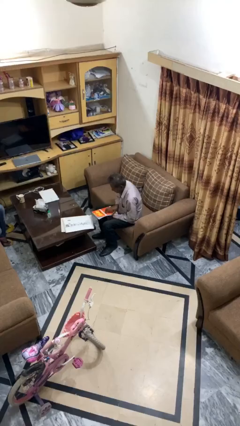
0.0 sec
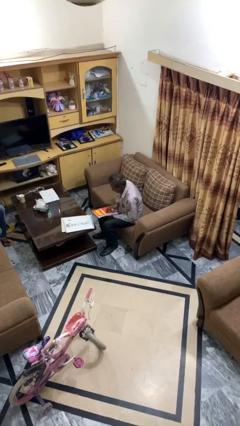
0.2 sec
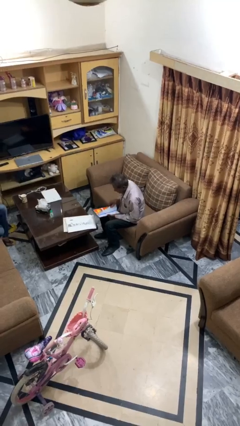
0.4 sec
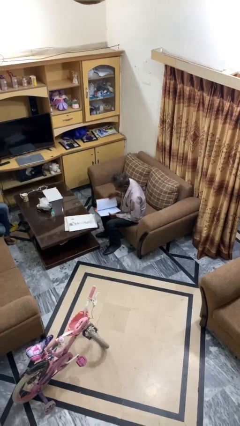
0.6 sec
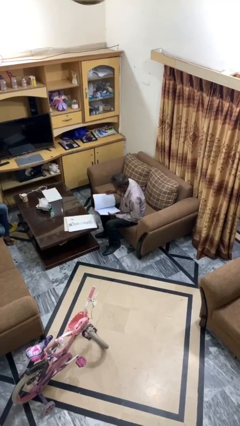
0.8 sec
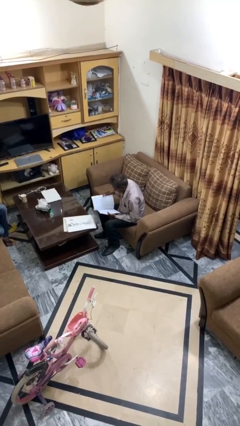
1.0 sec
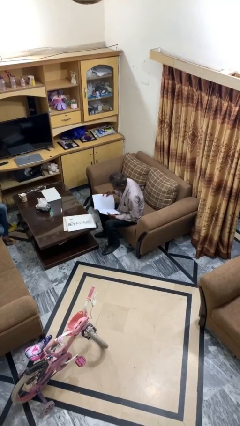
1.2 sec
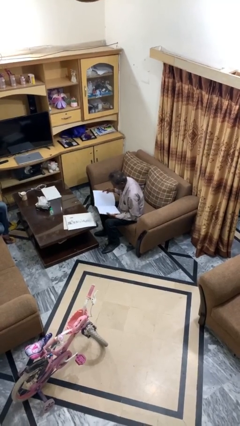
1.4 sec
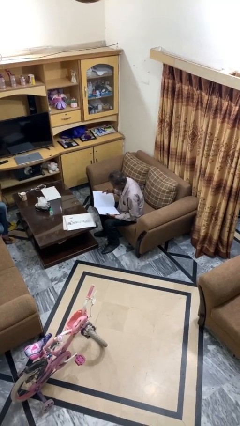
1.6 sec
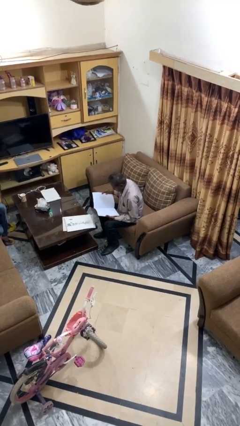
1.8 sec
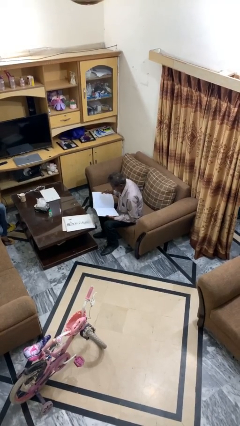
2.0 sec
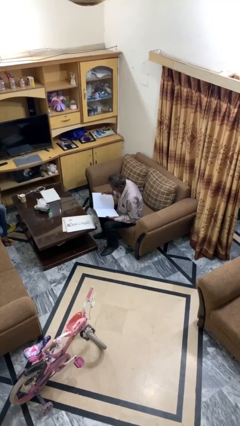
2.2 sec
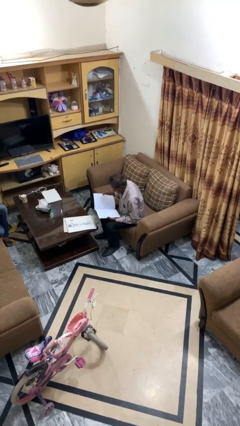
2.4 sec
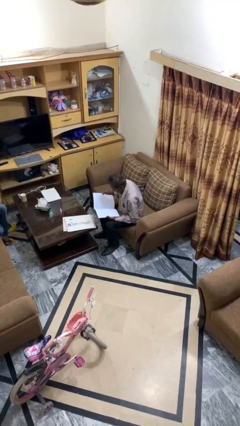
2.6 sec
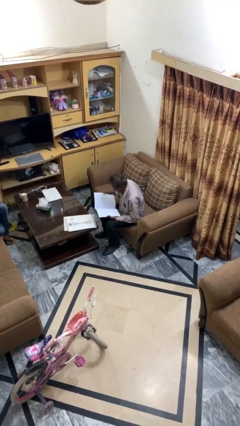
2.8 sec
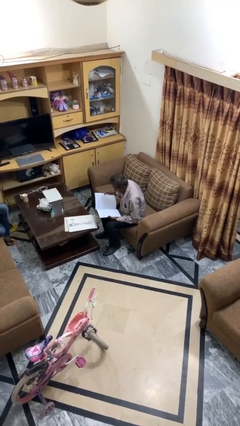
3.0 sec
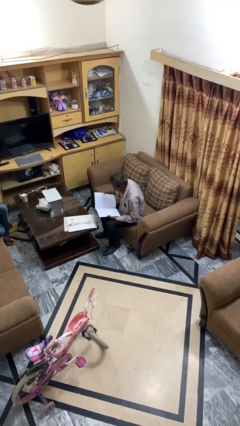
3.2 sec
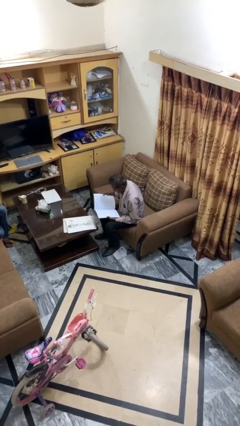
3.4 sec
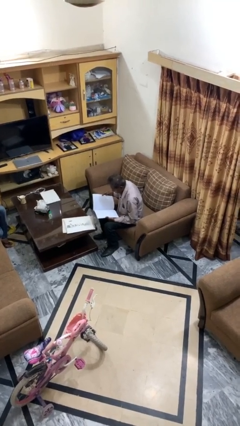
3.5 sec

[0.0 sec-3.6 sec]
person reads document

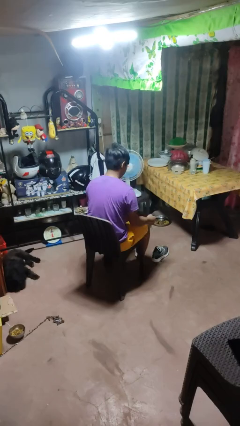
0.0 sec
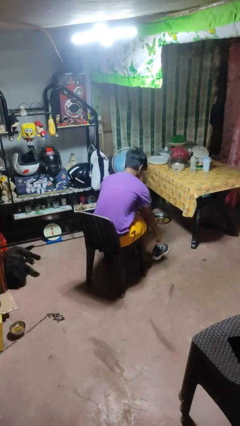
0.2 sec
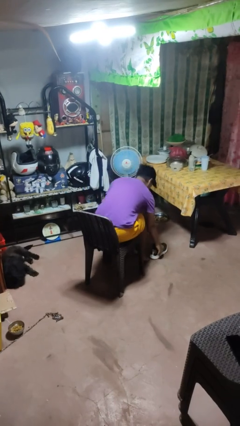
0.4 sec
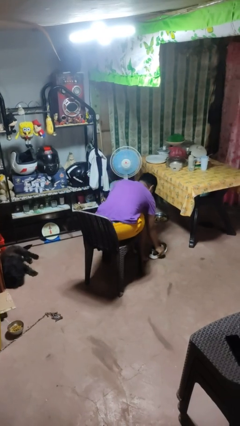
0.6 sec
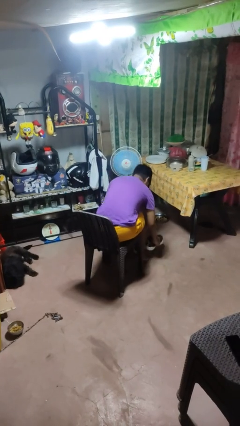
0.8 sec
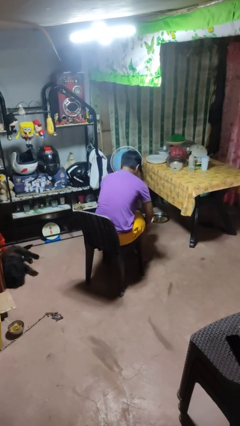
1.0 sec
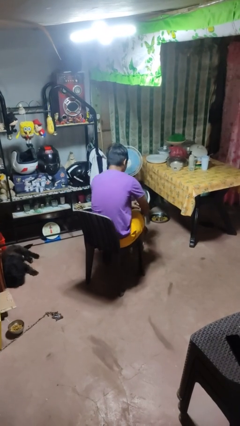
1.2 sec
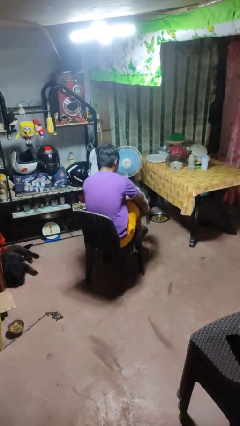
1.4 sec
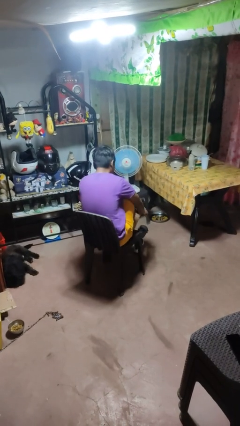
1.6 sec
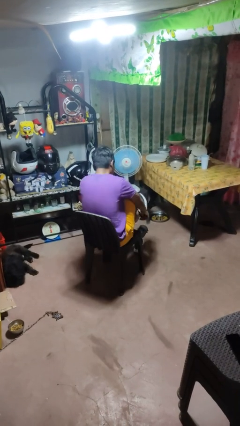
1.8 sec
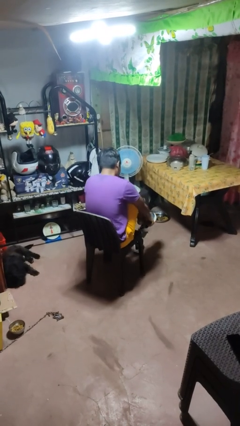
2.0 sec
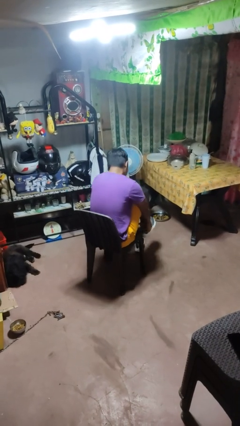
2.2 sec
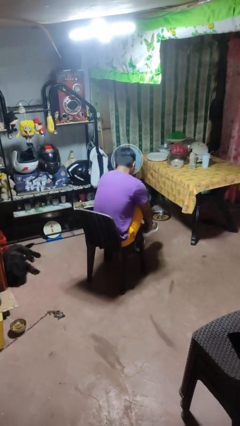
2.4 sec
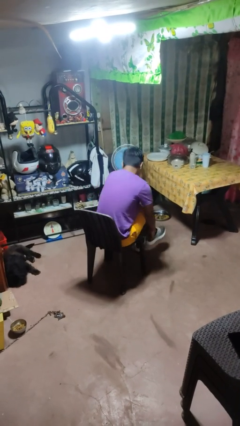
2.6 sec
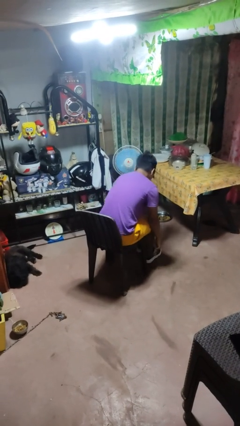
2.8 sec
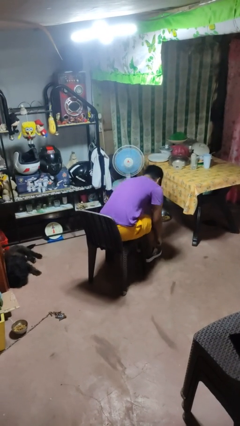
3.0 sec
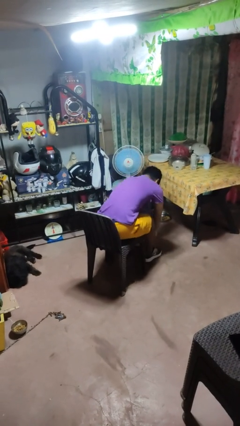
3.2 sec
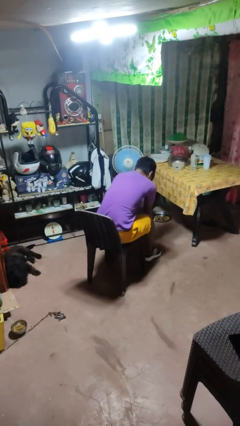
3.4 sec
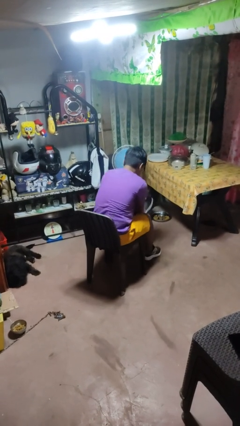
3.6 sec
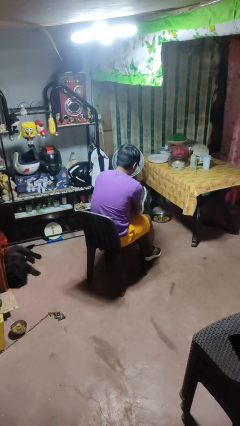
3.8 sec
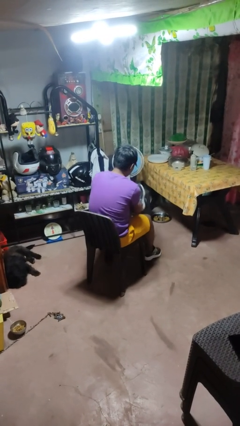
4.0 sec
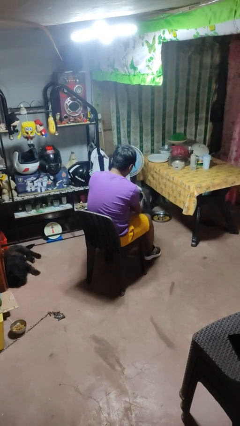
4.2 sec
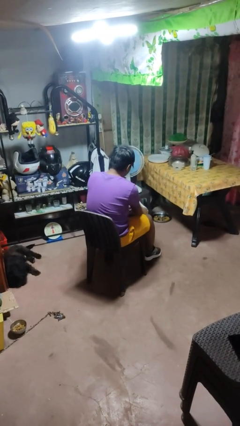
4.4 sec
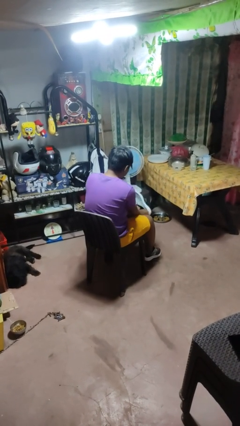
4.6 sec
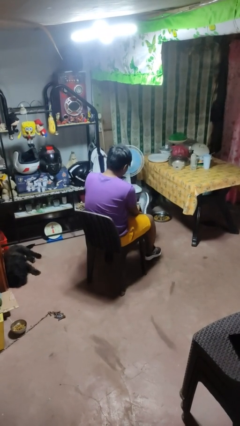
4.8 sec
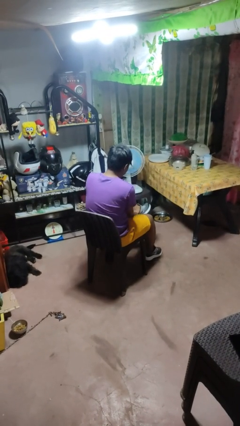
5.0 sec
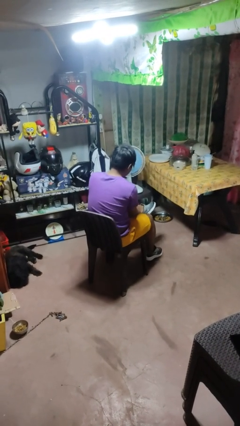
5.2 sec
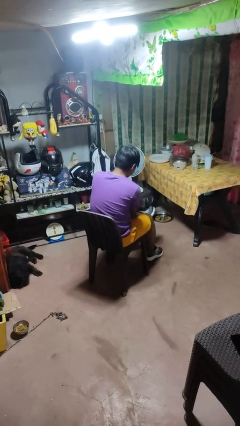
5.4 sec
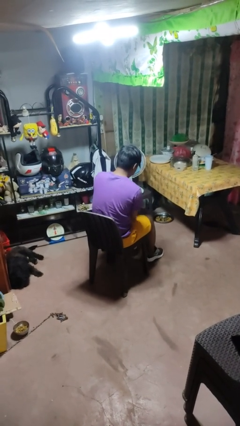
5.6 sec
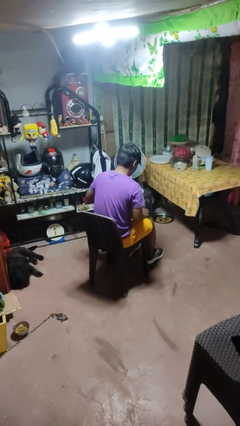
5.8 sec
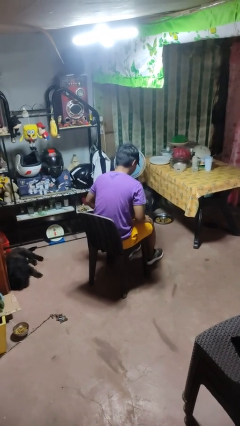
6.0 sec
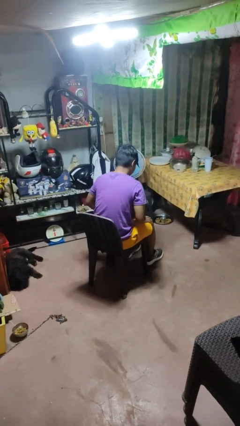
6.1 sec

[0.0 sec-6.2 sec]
person puts on shoes

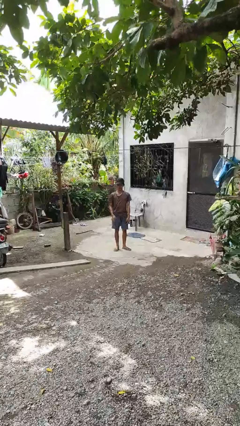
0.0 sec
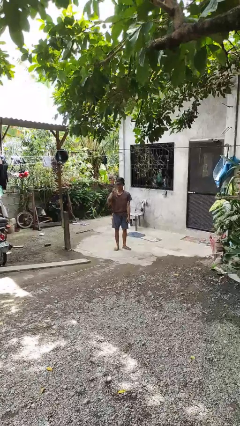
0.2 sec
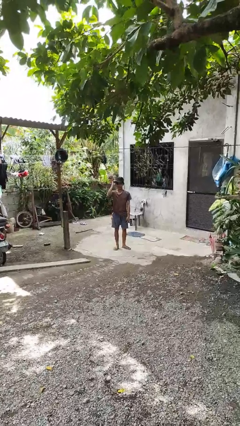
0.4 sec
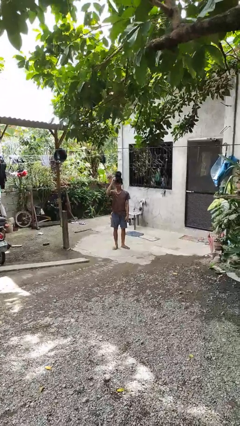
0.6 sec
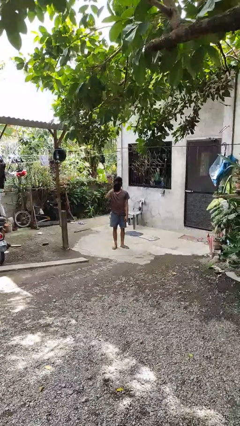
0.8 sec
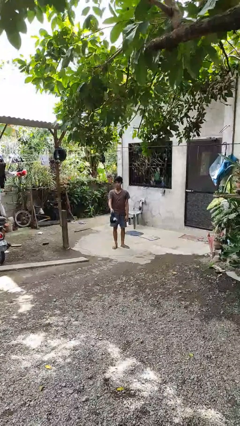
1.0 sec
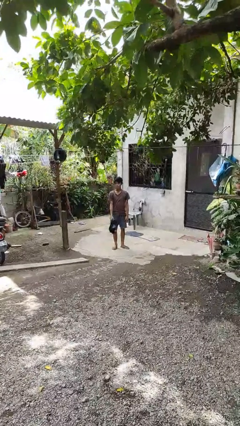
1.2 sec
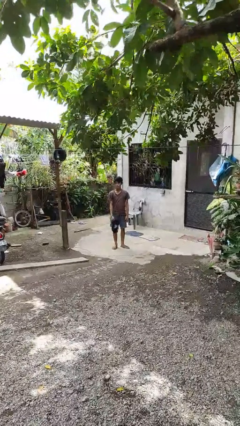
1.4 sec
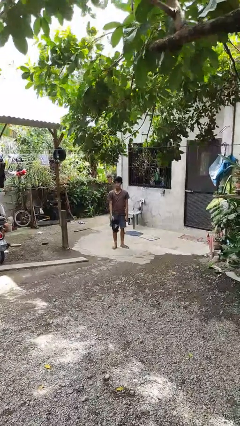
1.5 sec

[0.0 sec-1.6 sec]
person takes off hat

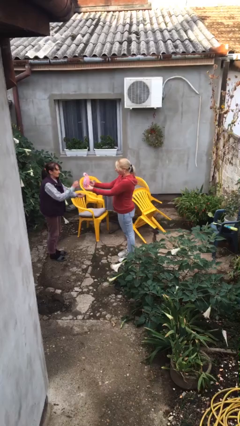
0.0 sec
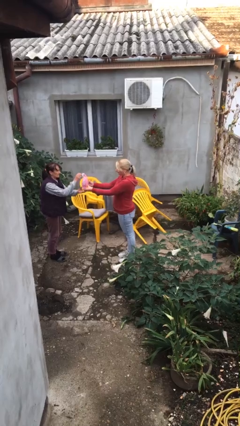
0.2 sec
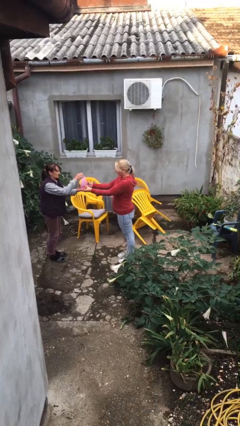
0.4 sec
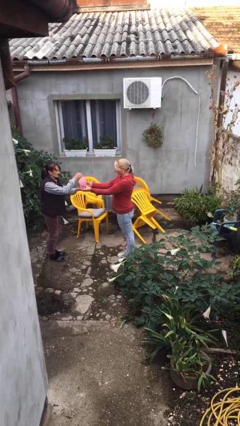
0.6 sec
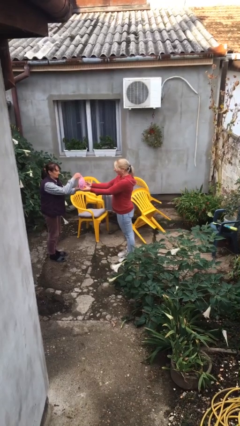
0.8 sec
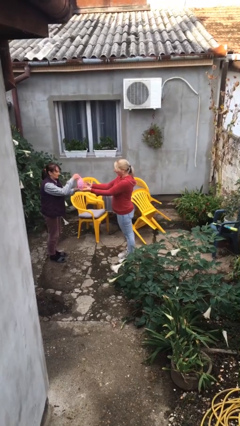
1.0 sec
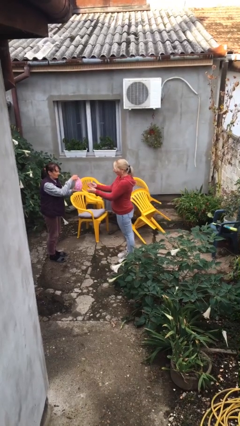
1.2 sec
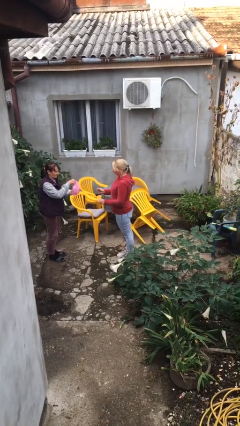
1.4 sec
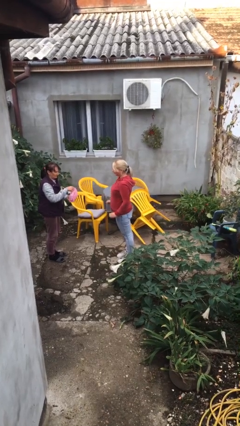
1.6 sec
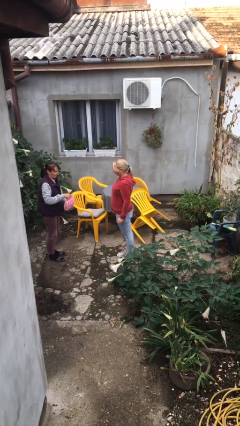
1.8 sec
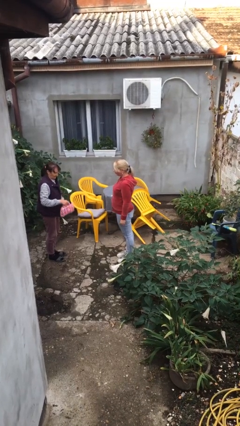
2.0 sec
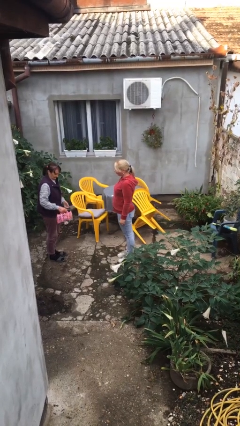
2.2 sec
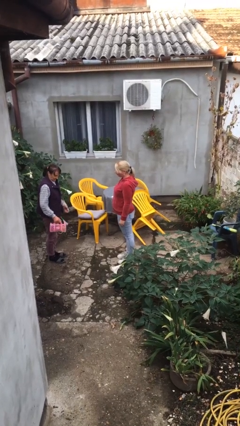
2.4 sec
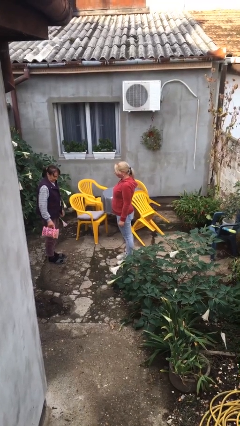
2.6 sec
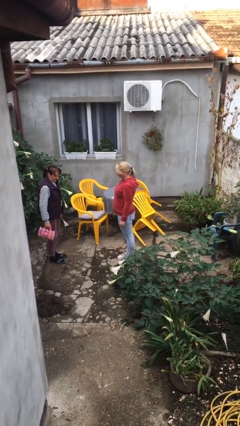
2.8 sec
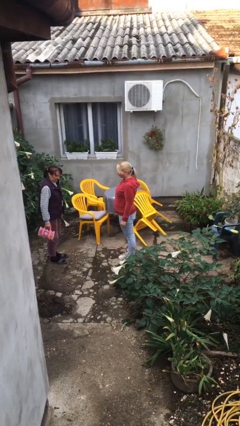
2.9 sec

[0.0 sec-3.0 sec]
person transfers object to person

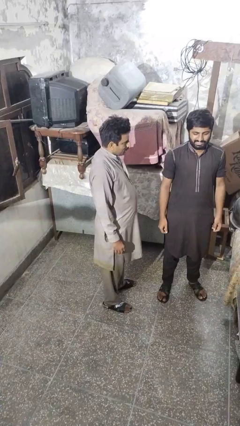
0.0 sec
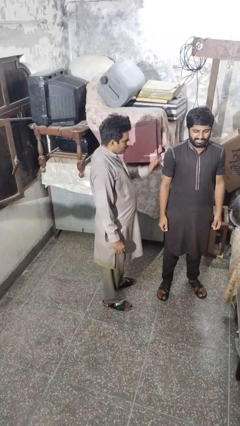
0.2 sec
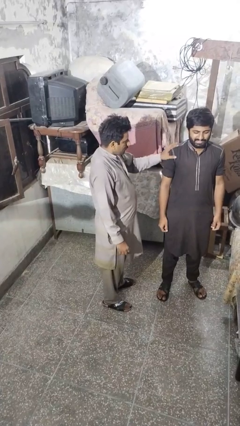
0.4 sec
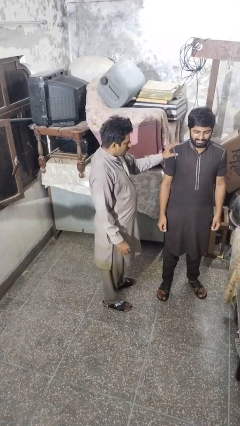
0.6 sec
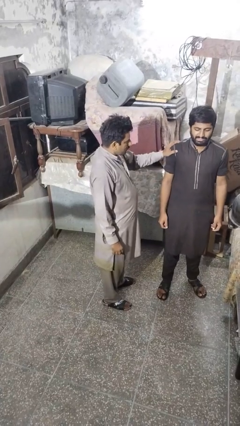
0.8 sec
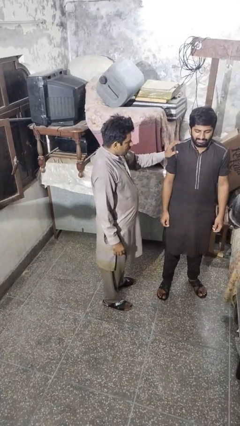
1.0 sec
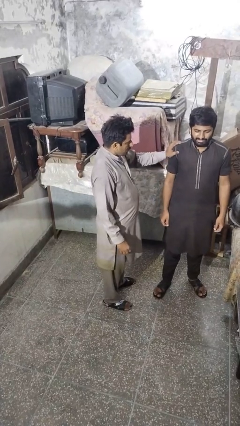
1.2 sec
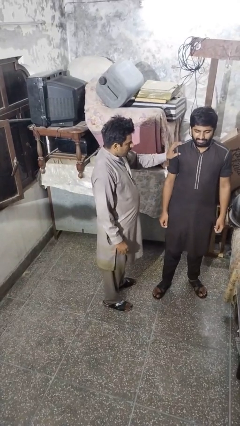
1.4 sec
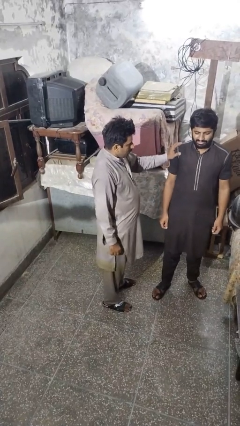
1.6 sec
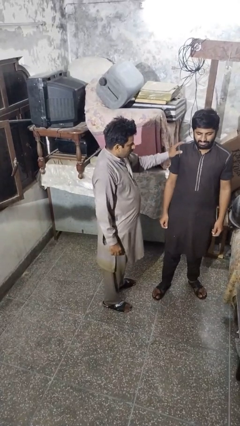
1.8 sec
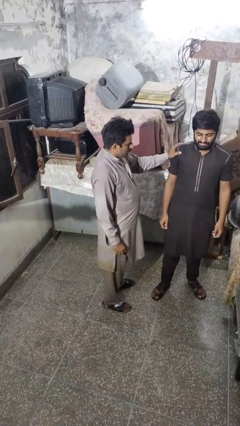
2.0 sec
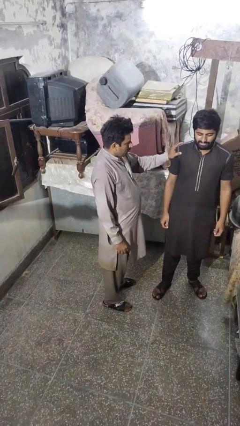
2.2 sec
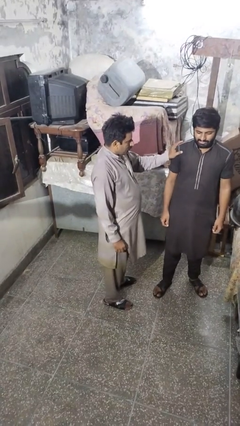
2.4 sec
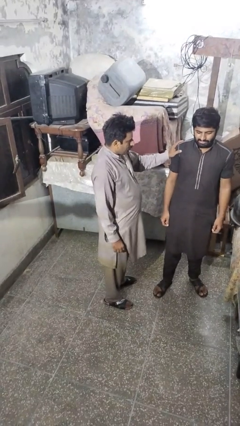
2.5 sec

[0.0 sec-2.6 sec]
person grabs person by shoulder

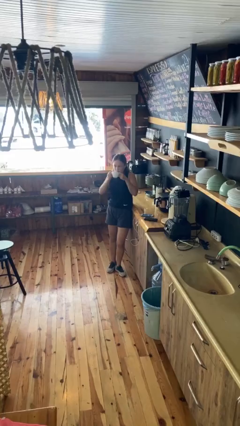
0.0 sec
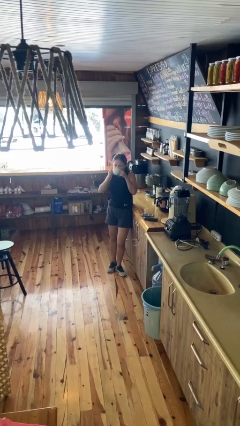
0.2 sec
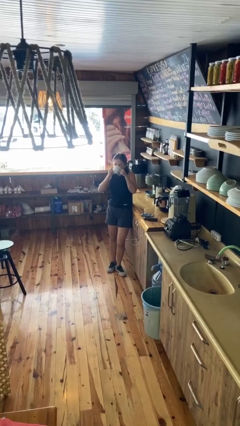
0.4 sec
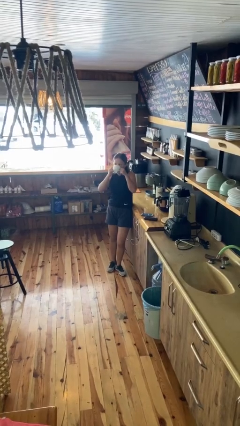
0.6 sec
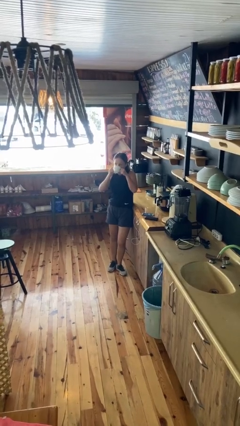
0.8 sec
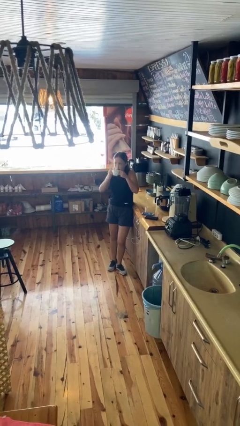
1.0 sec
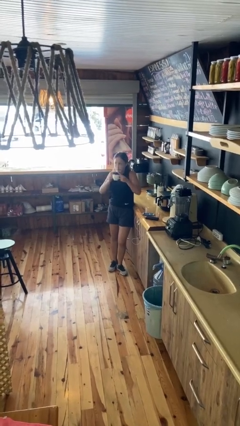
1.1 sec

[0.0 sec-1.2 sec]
person drinks from mug
